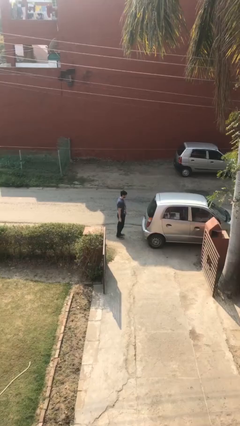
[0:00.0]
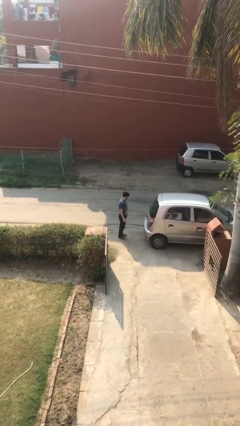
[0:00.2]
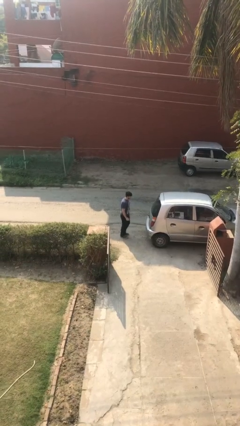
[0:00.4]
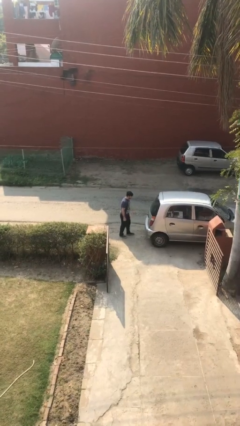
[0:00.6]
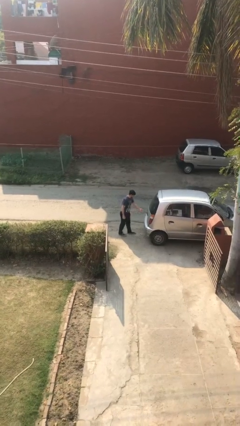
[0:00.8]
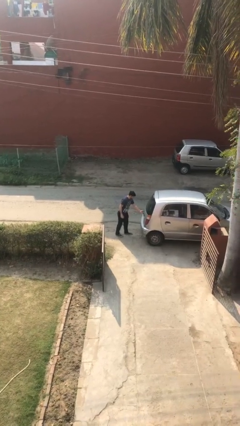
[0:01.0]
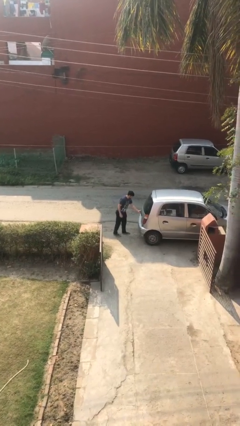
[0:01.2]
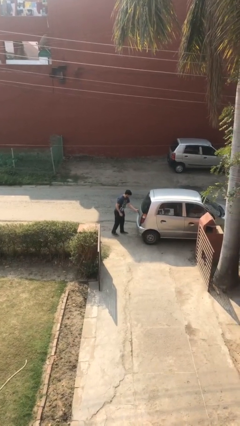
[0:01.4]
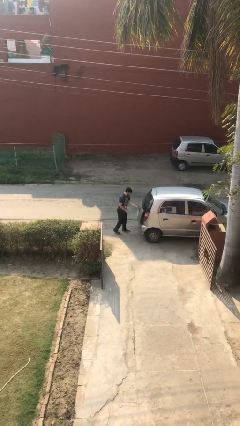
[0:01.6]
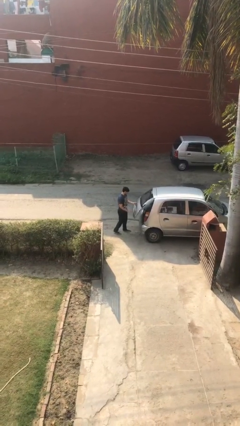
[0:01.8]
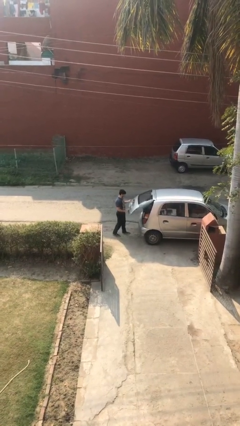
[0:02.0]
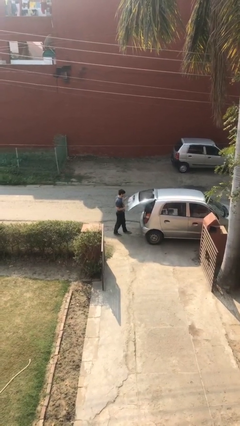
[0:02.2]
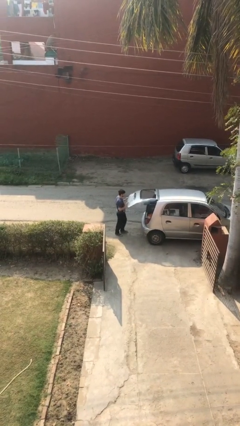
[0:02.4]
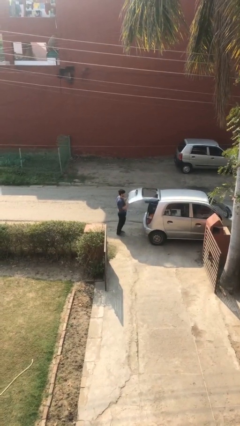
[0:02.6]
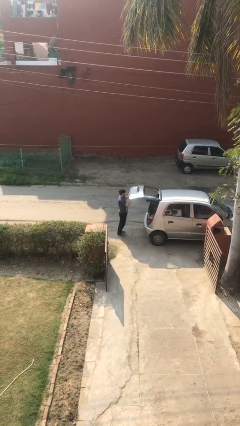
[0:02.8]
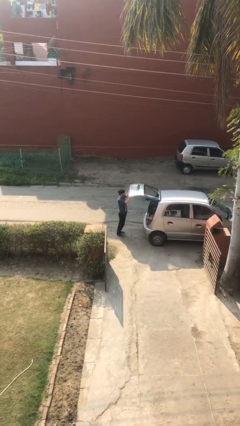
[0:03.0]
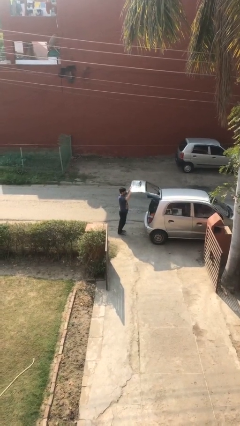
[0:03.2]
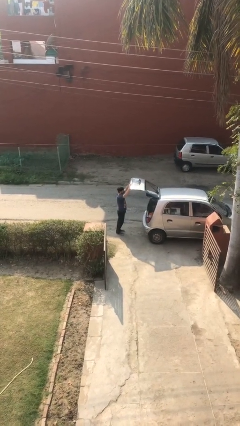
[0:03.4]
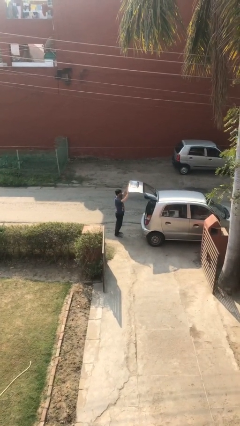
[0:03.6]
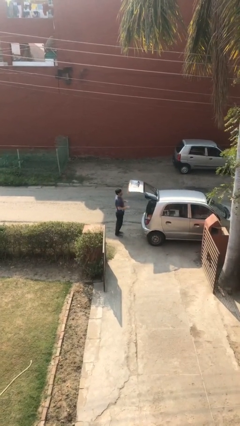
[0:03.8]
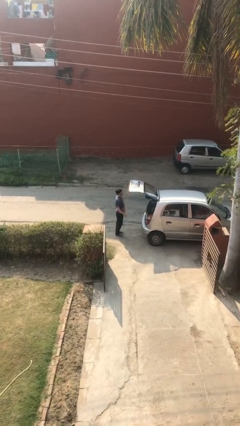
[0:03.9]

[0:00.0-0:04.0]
person opens car trunk

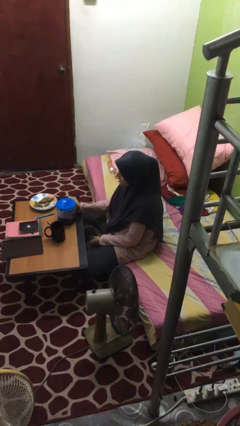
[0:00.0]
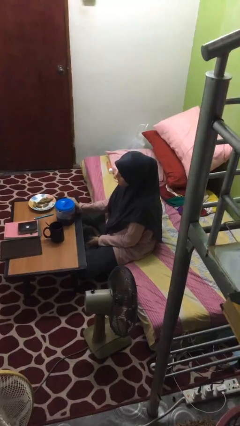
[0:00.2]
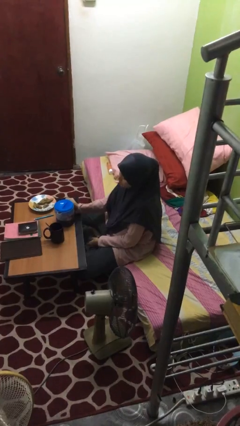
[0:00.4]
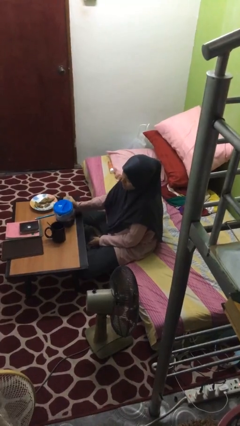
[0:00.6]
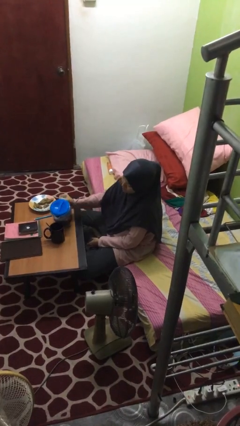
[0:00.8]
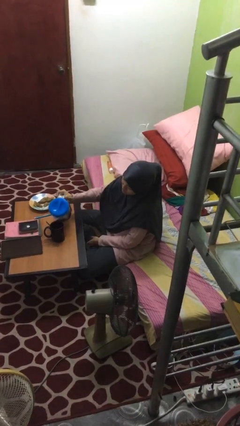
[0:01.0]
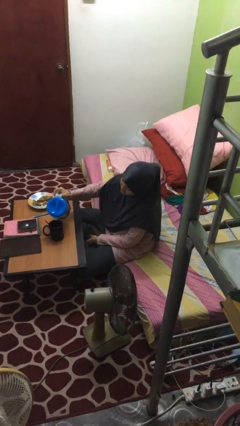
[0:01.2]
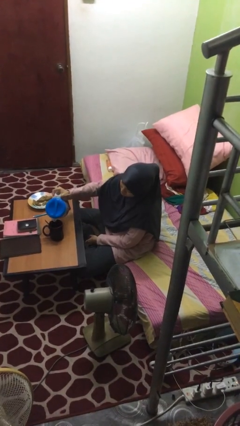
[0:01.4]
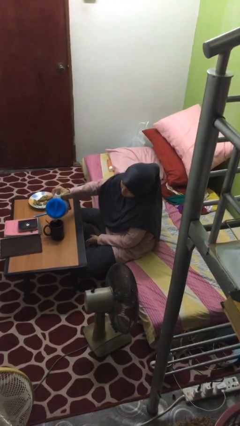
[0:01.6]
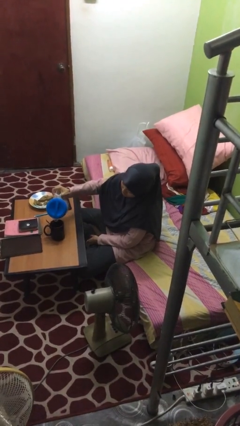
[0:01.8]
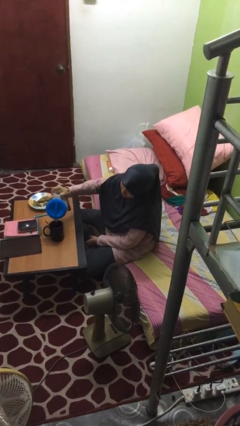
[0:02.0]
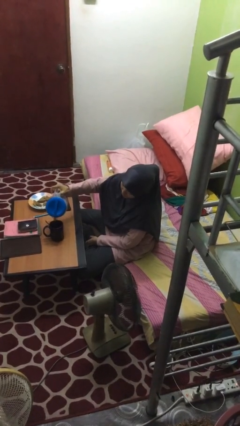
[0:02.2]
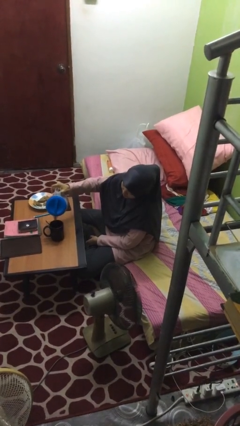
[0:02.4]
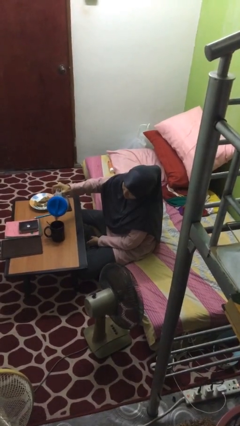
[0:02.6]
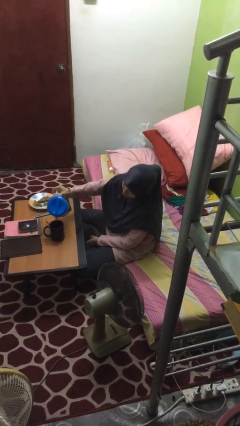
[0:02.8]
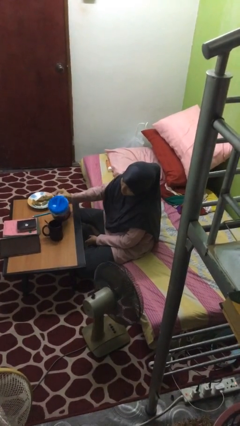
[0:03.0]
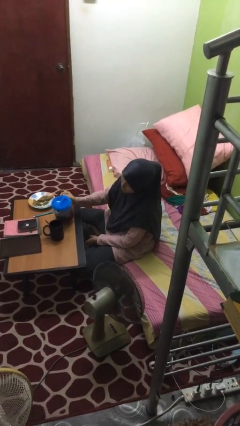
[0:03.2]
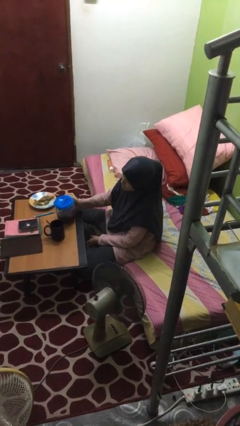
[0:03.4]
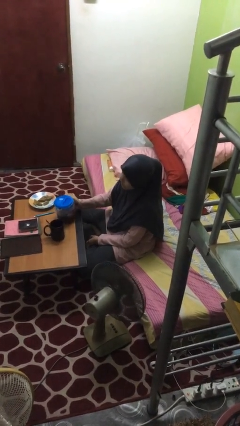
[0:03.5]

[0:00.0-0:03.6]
person pours coffee into mug

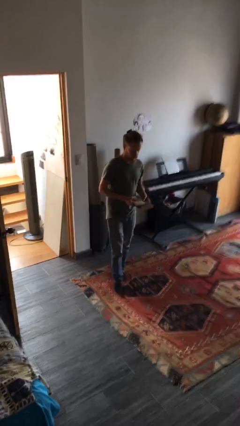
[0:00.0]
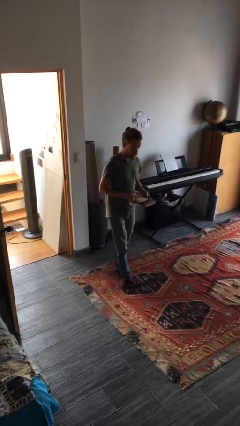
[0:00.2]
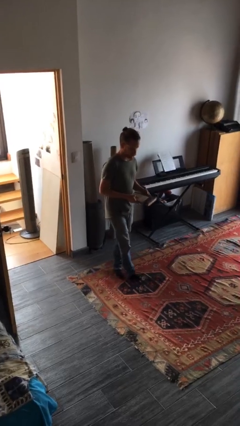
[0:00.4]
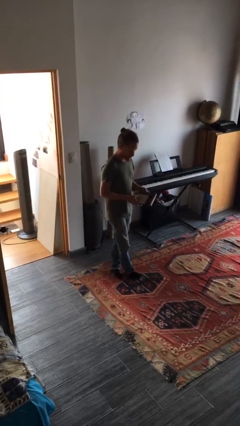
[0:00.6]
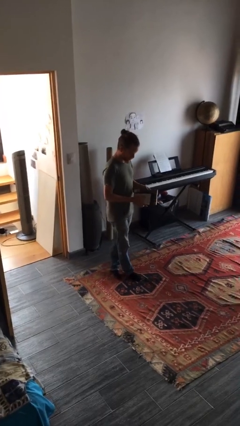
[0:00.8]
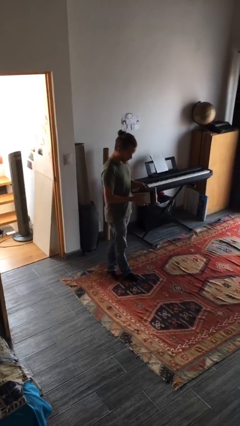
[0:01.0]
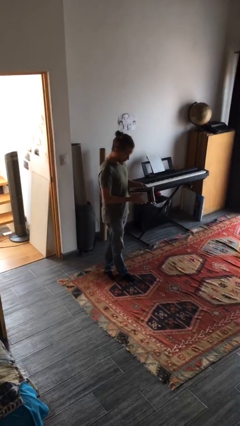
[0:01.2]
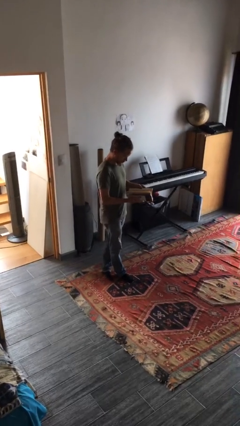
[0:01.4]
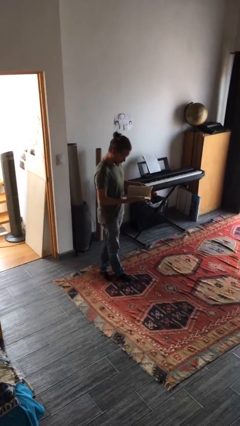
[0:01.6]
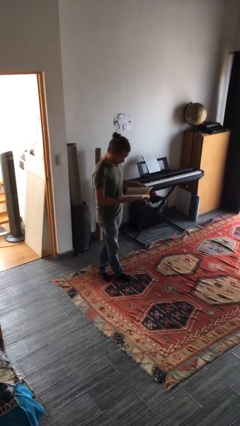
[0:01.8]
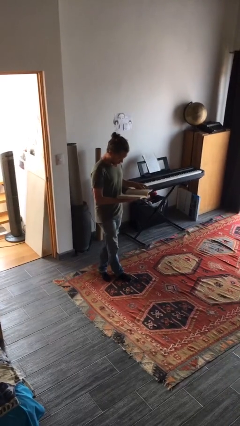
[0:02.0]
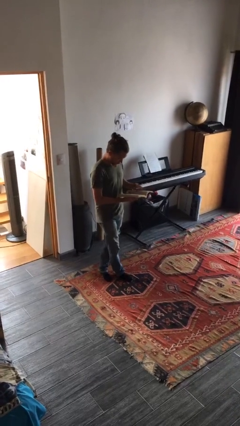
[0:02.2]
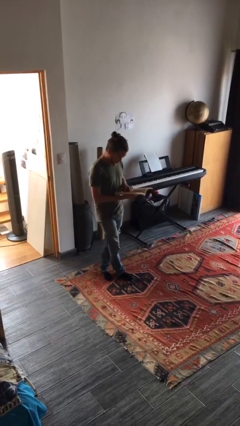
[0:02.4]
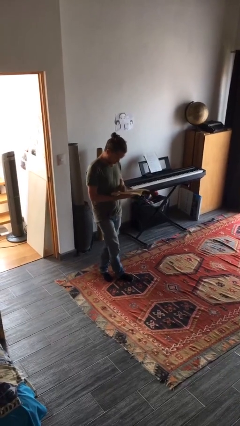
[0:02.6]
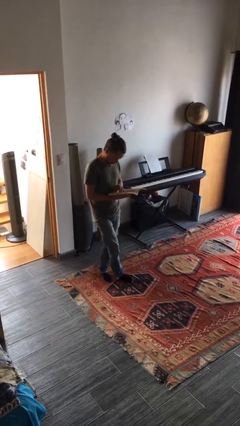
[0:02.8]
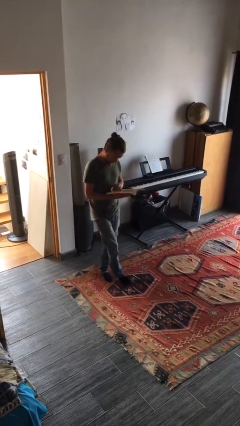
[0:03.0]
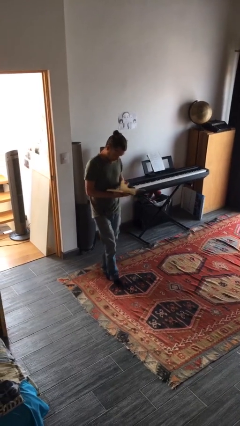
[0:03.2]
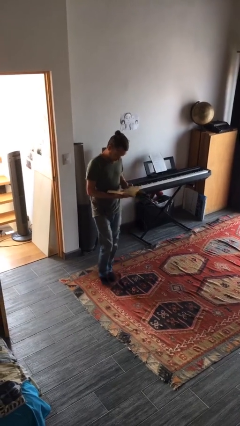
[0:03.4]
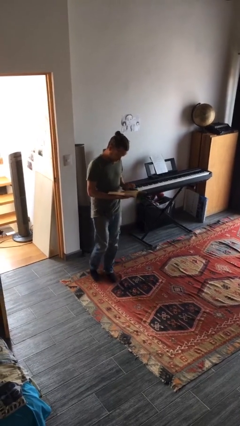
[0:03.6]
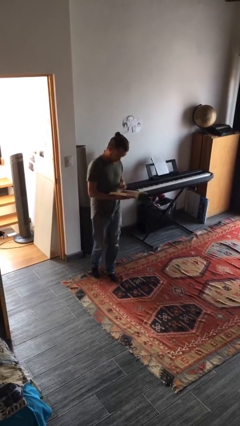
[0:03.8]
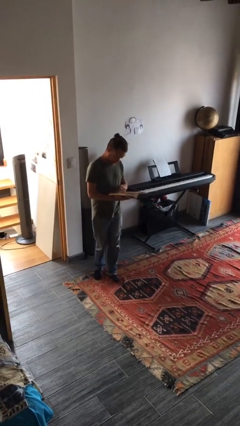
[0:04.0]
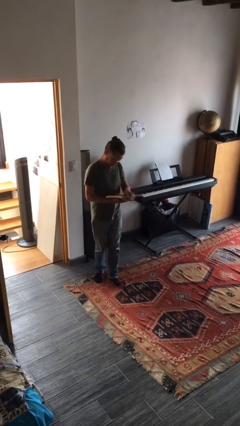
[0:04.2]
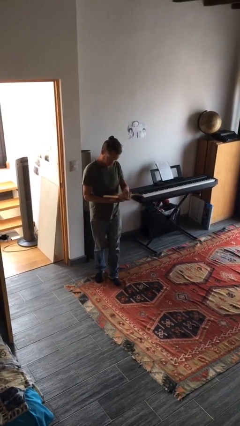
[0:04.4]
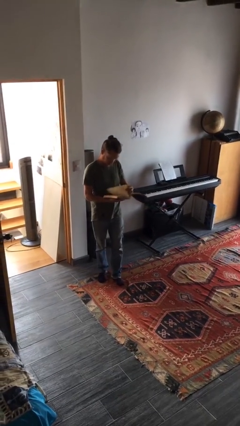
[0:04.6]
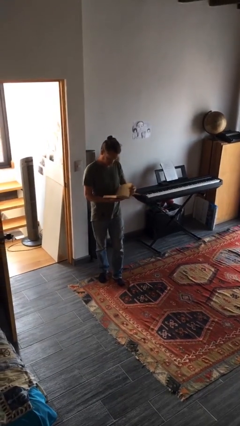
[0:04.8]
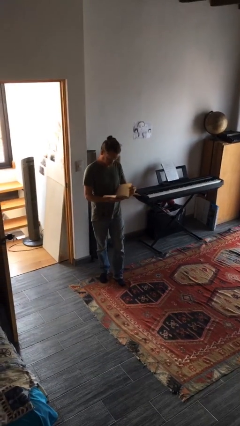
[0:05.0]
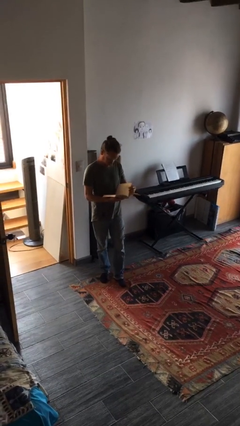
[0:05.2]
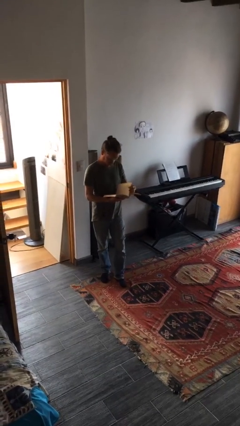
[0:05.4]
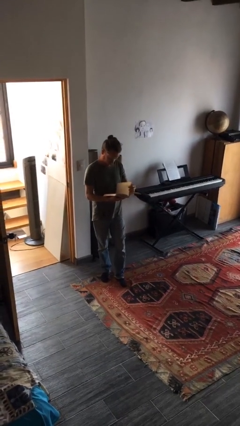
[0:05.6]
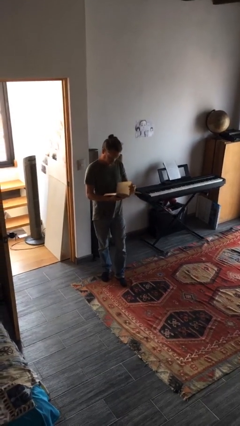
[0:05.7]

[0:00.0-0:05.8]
person reads book

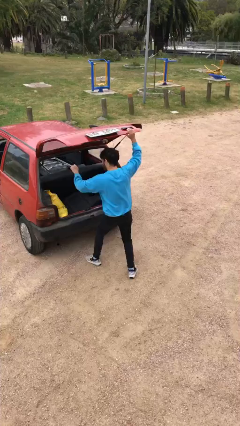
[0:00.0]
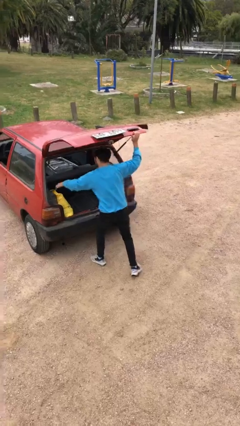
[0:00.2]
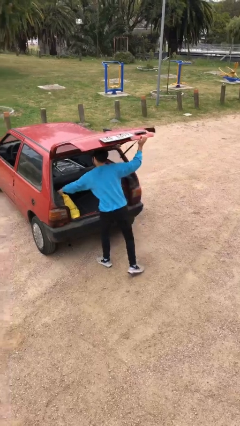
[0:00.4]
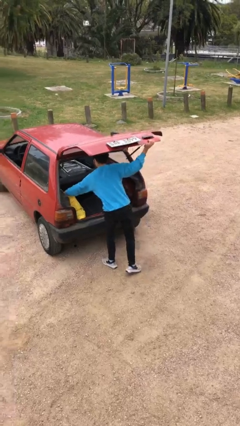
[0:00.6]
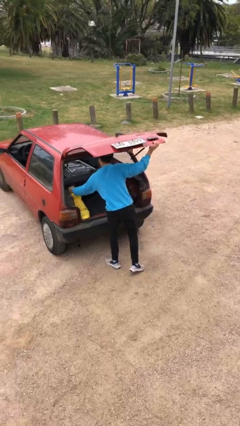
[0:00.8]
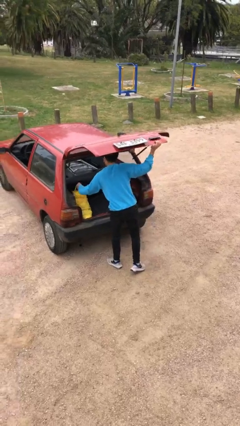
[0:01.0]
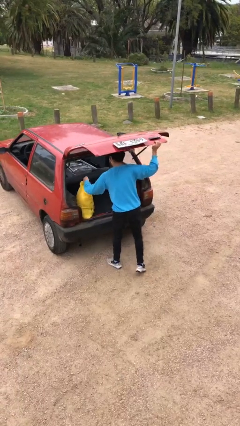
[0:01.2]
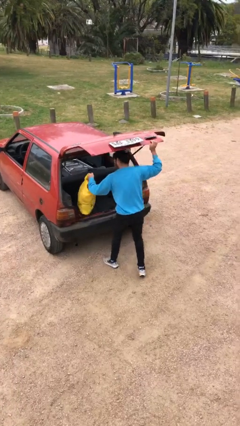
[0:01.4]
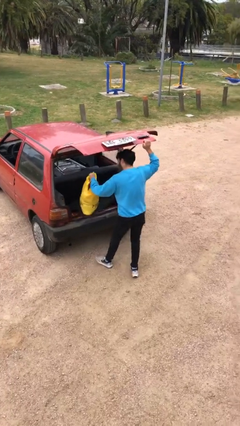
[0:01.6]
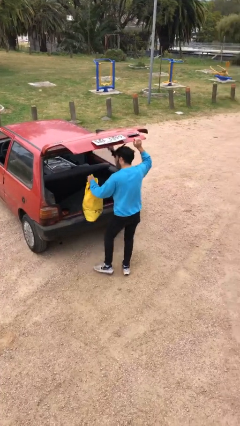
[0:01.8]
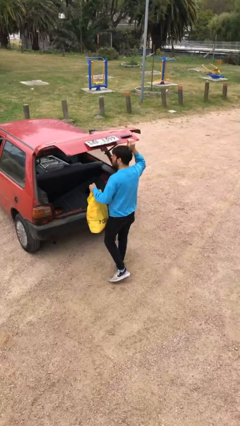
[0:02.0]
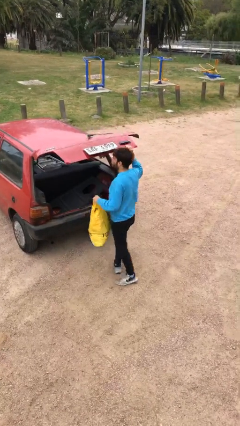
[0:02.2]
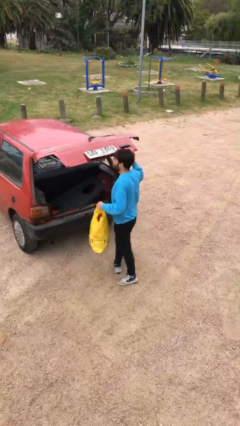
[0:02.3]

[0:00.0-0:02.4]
person unloads car

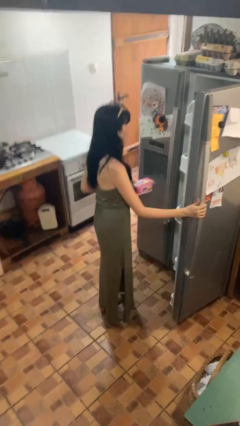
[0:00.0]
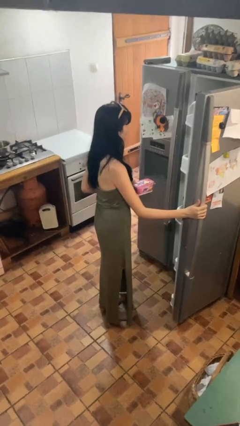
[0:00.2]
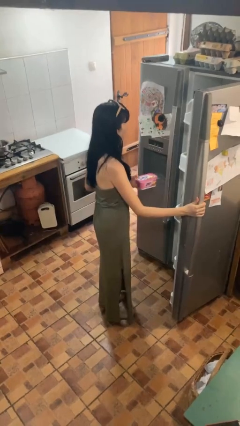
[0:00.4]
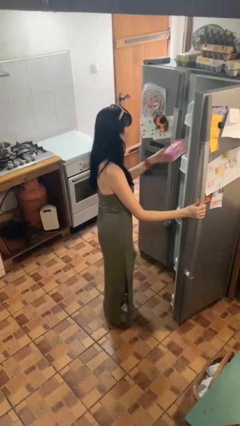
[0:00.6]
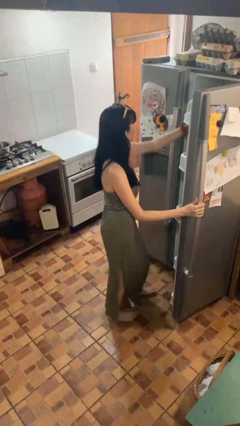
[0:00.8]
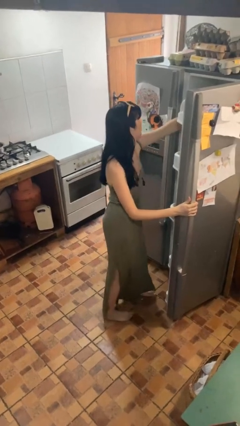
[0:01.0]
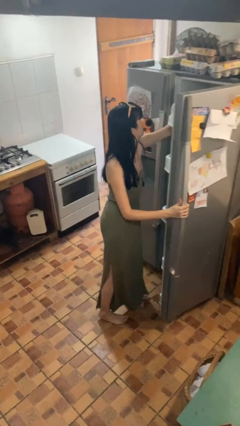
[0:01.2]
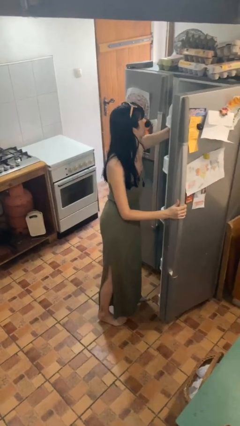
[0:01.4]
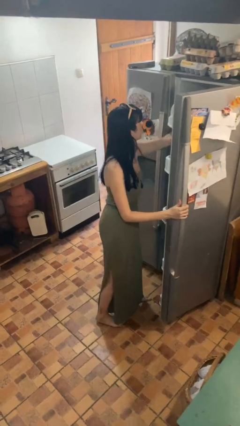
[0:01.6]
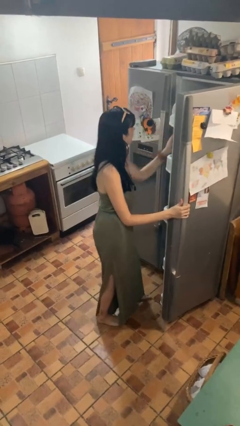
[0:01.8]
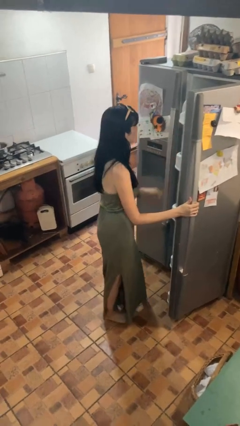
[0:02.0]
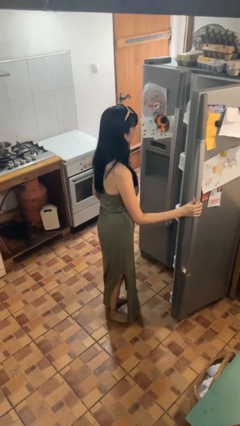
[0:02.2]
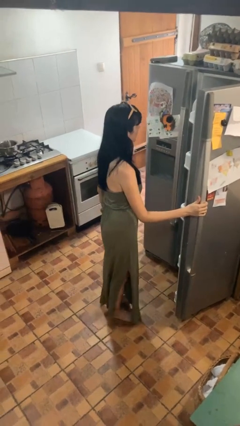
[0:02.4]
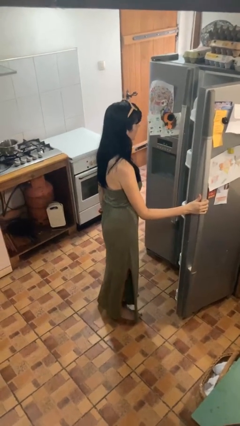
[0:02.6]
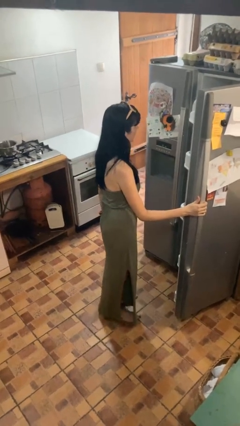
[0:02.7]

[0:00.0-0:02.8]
person puts object into refrigerator
